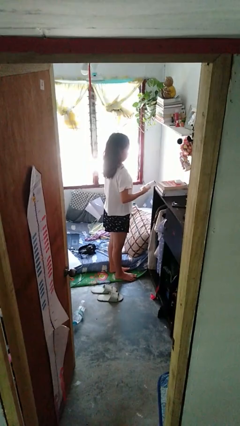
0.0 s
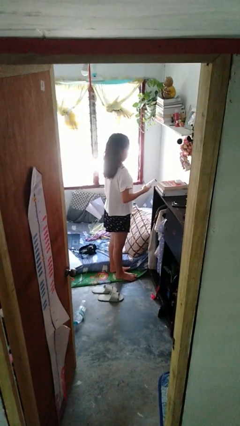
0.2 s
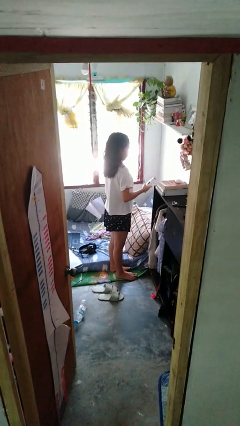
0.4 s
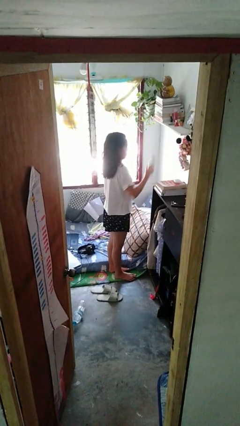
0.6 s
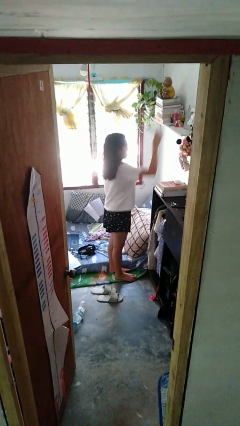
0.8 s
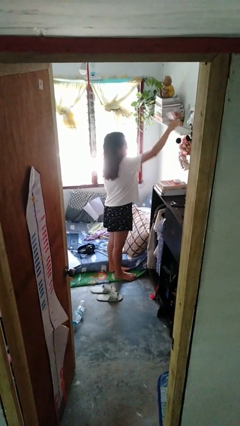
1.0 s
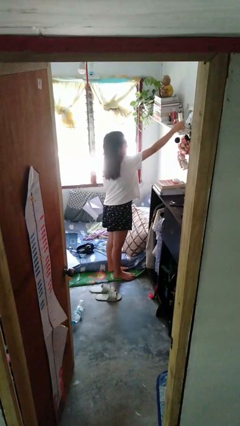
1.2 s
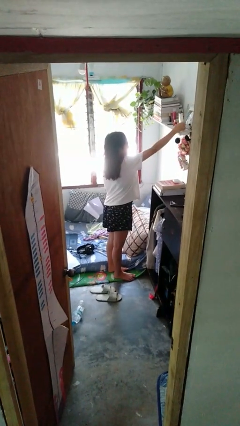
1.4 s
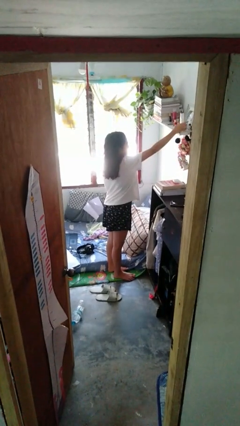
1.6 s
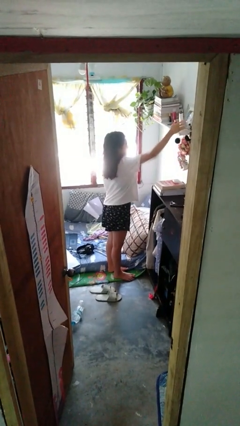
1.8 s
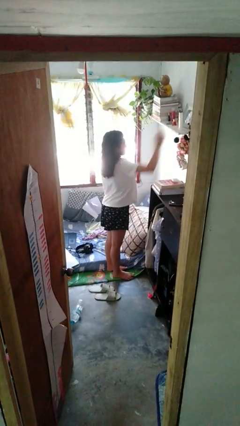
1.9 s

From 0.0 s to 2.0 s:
person puts down object on shelf

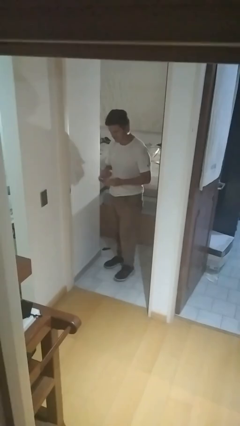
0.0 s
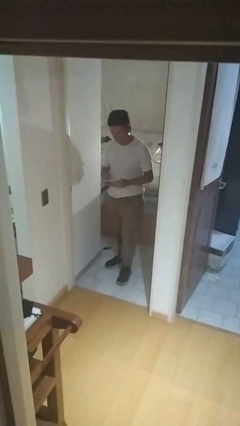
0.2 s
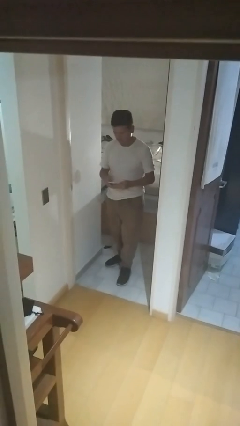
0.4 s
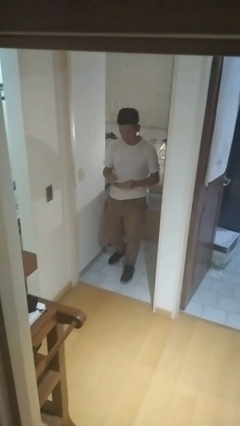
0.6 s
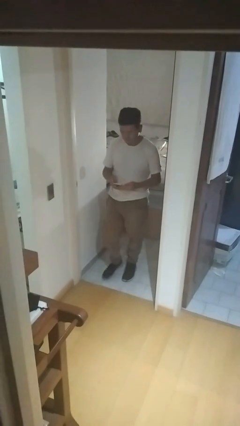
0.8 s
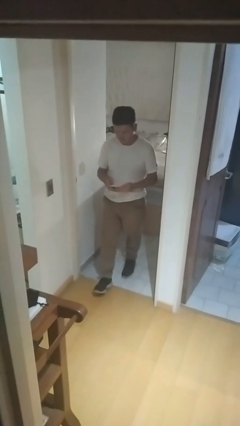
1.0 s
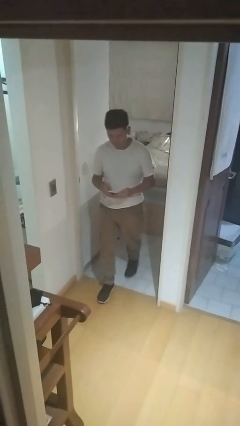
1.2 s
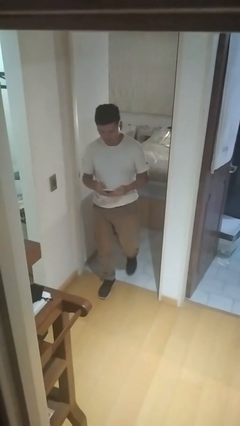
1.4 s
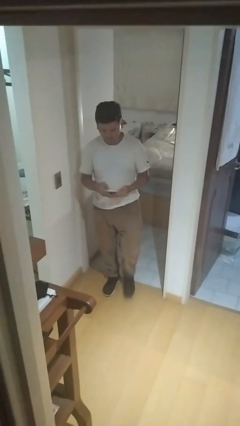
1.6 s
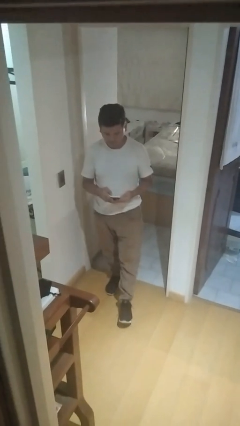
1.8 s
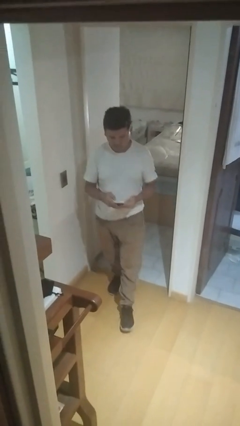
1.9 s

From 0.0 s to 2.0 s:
person enters scene through structure

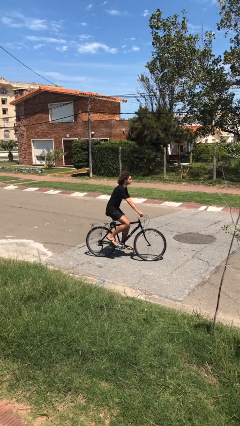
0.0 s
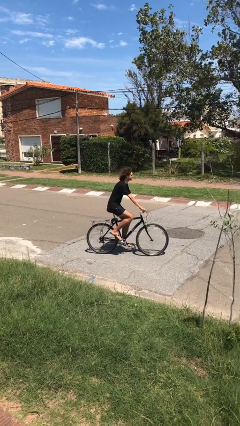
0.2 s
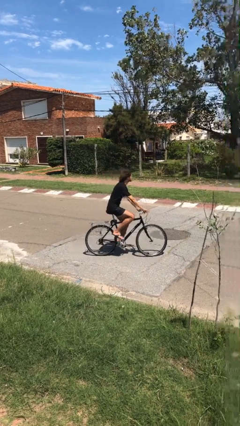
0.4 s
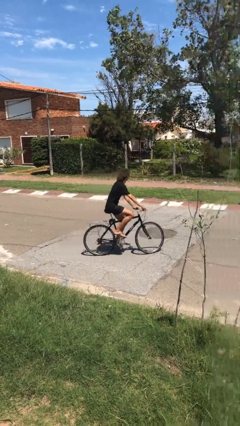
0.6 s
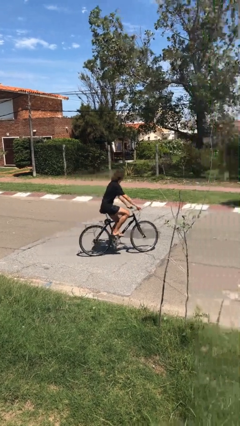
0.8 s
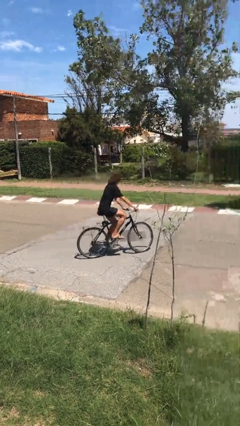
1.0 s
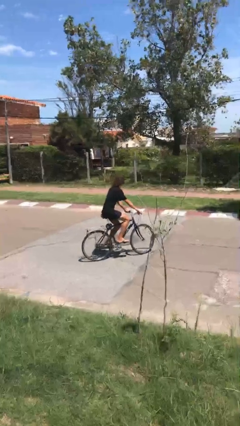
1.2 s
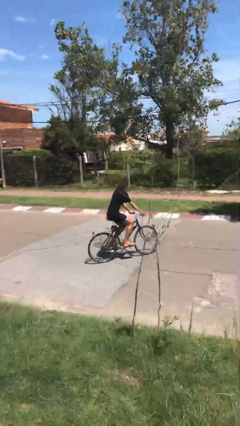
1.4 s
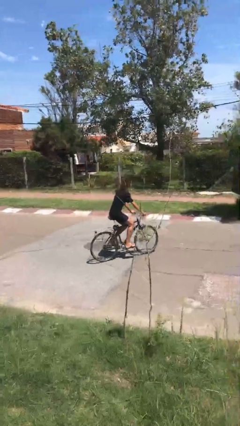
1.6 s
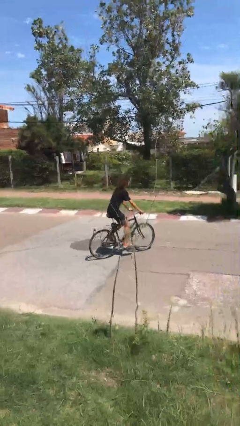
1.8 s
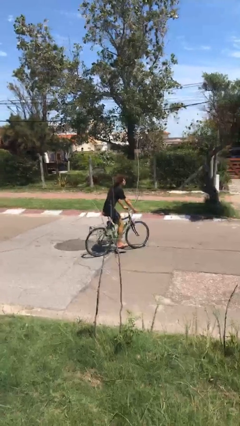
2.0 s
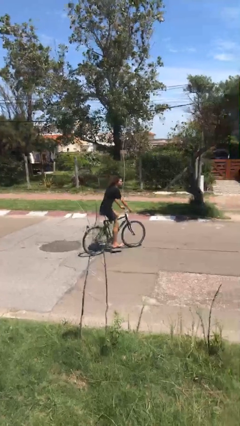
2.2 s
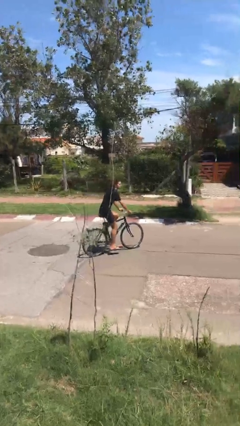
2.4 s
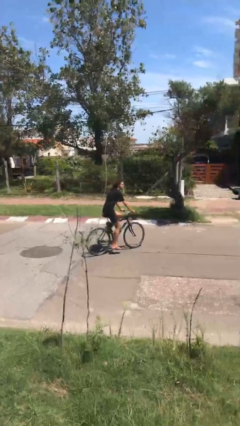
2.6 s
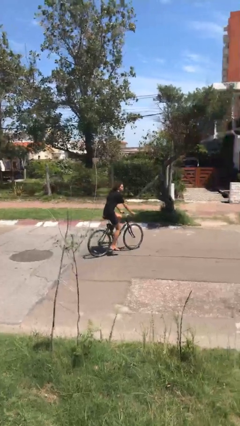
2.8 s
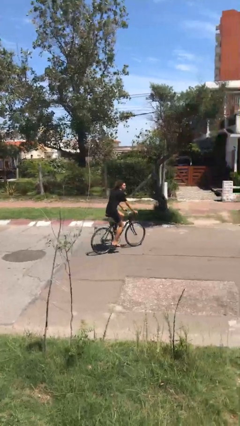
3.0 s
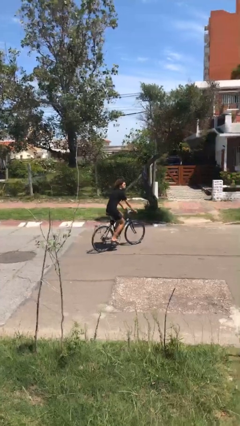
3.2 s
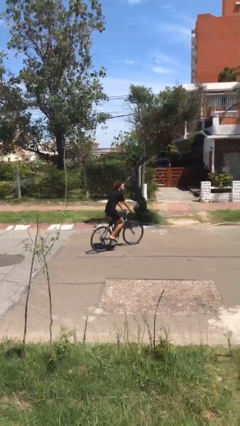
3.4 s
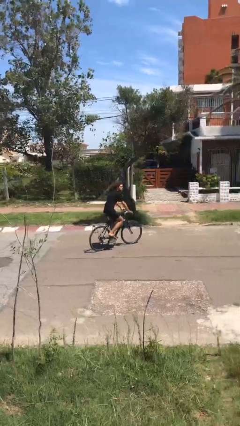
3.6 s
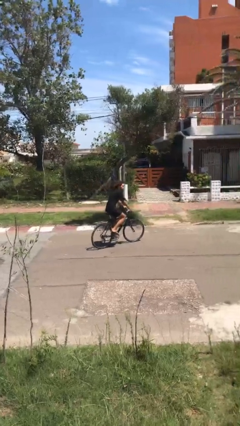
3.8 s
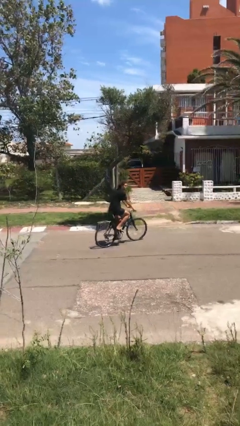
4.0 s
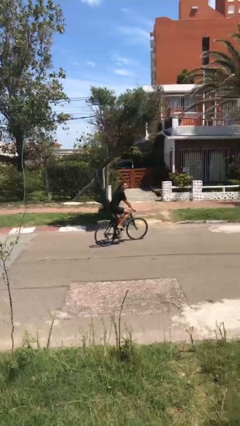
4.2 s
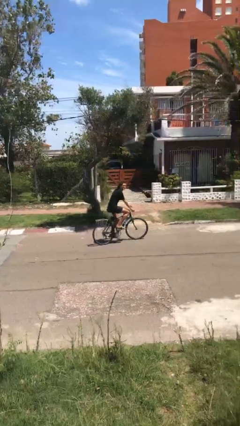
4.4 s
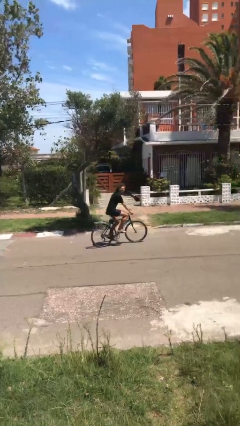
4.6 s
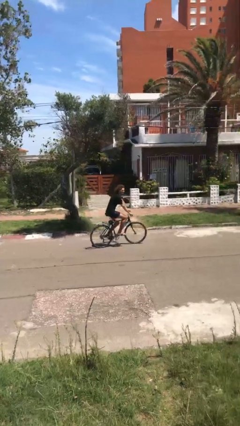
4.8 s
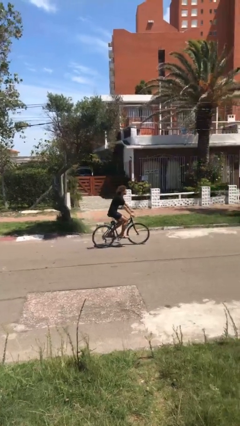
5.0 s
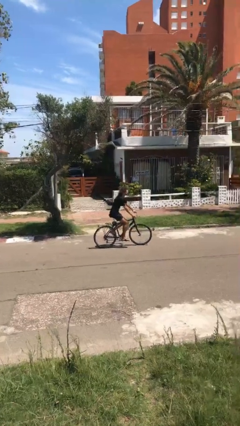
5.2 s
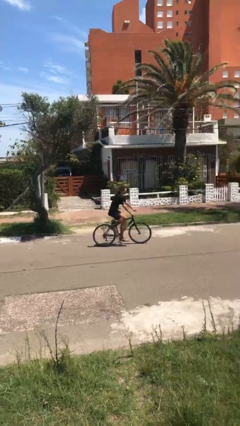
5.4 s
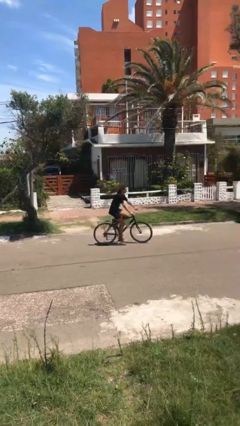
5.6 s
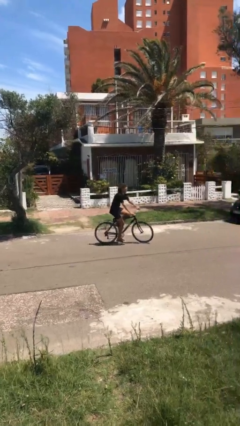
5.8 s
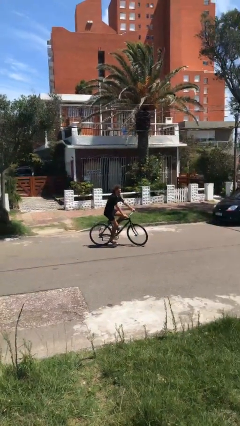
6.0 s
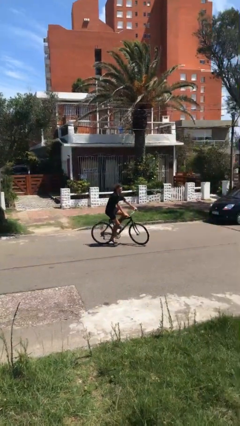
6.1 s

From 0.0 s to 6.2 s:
person rides bicycle

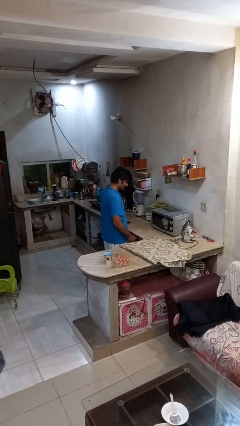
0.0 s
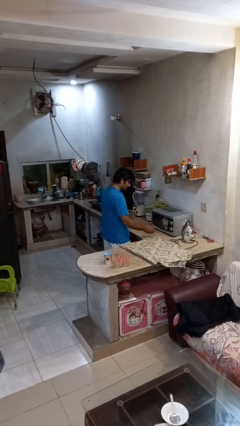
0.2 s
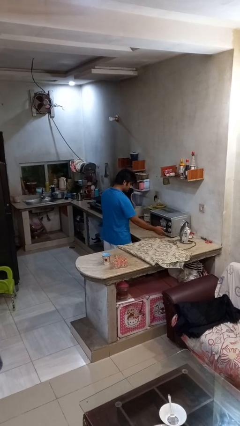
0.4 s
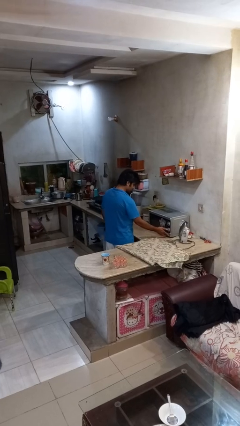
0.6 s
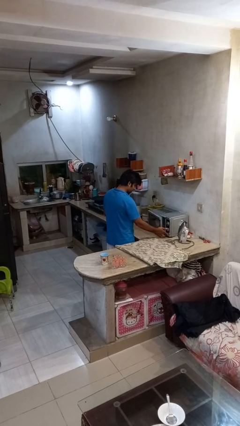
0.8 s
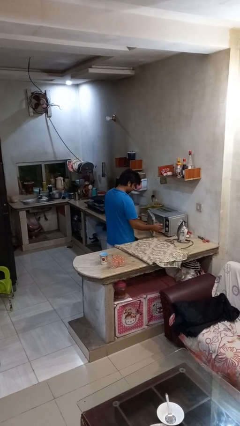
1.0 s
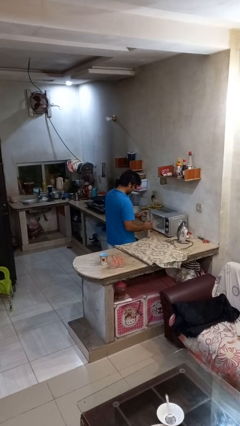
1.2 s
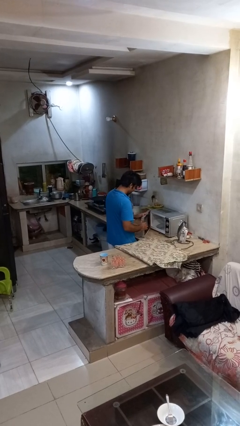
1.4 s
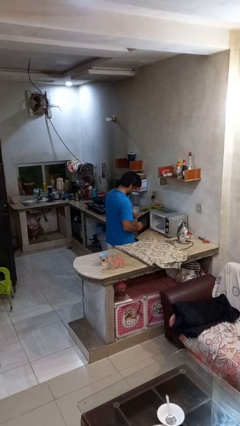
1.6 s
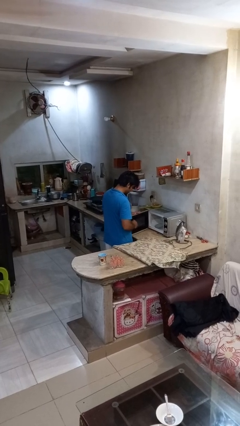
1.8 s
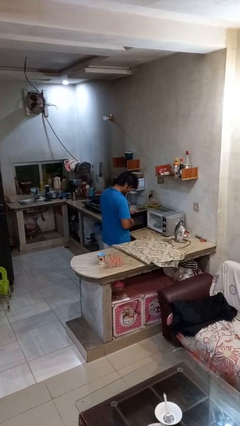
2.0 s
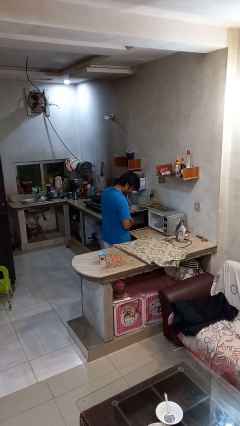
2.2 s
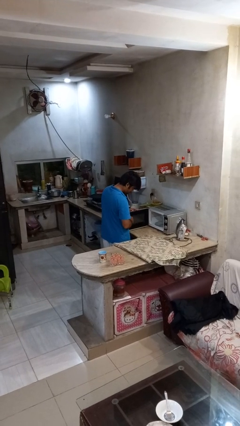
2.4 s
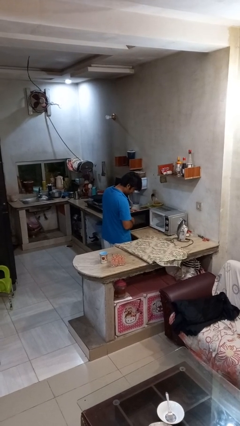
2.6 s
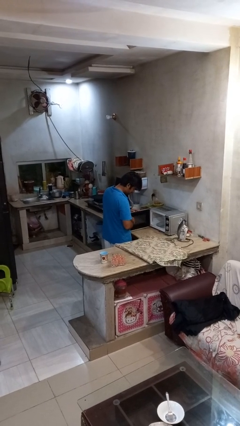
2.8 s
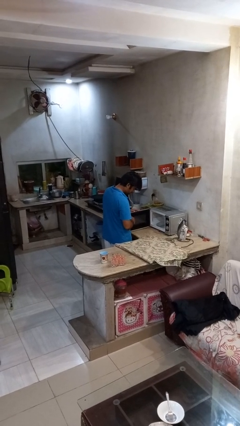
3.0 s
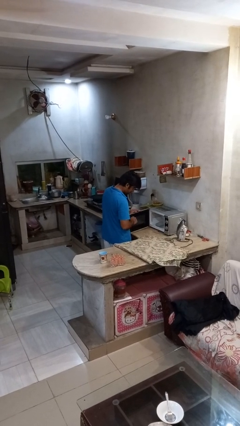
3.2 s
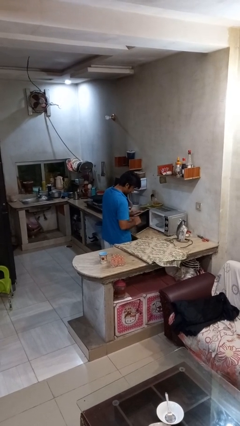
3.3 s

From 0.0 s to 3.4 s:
person opens microwave

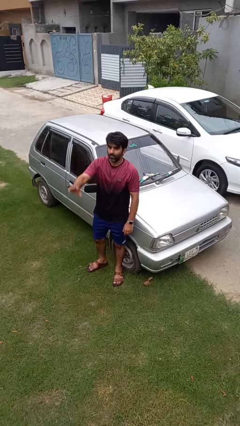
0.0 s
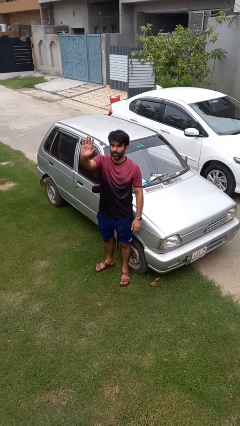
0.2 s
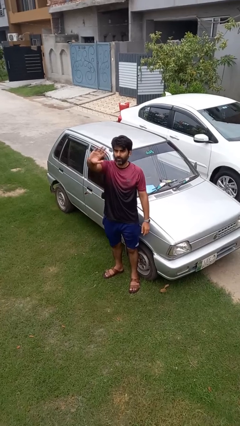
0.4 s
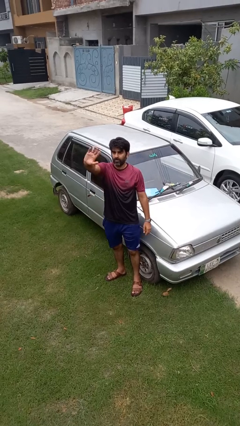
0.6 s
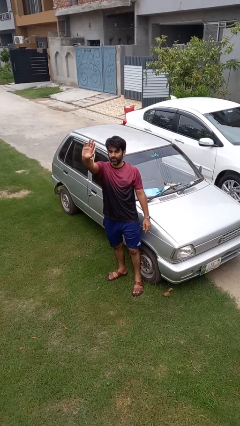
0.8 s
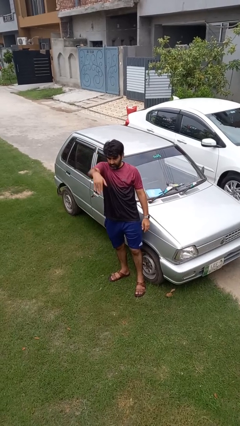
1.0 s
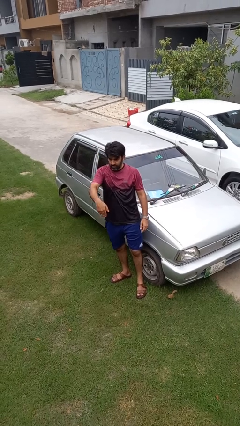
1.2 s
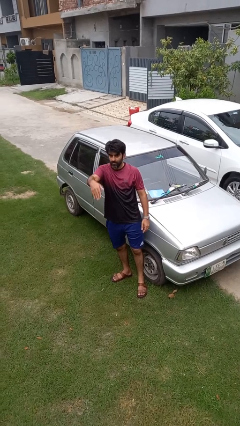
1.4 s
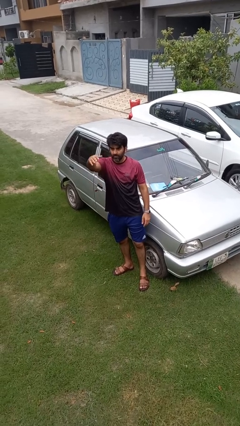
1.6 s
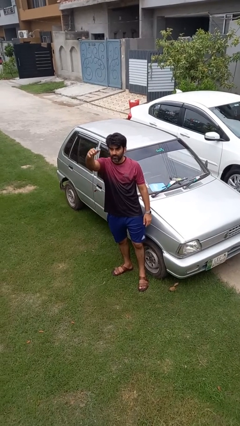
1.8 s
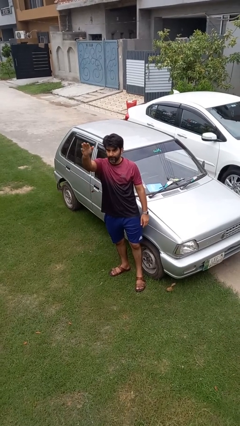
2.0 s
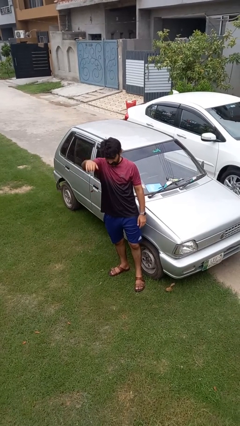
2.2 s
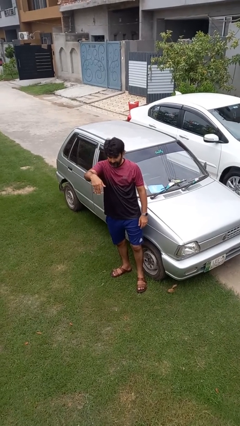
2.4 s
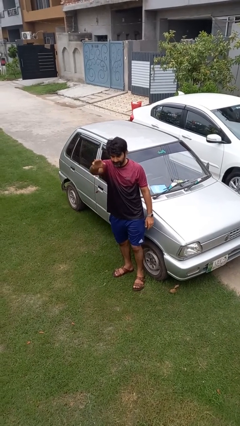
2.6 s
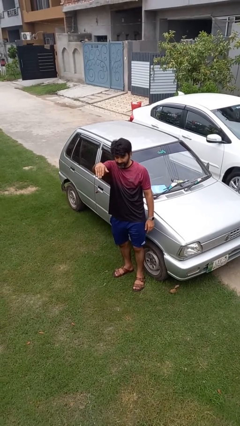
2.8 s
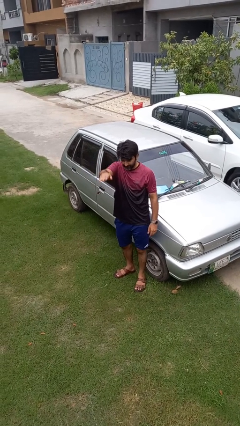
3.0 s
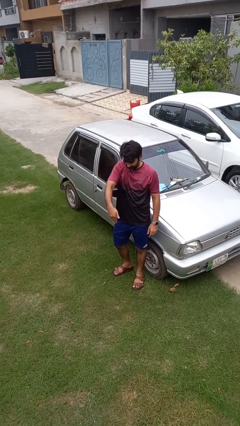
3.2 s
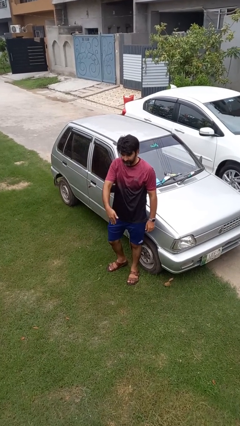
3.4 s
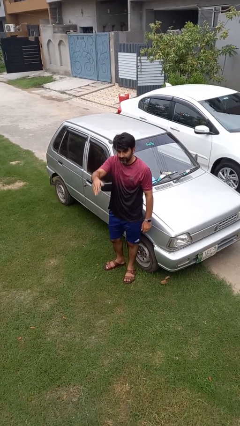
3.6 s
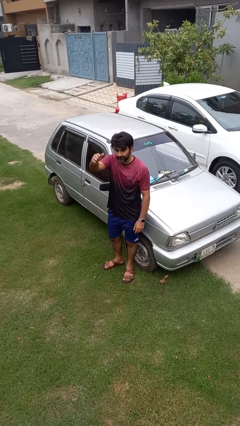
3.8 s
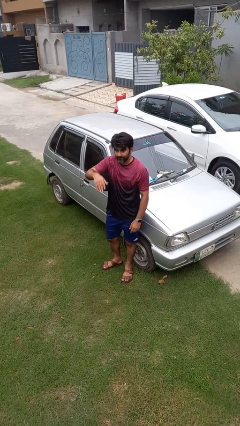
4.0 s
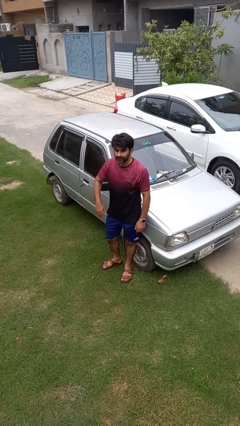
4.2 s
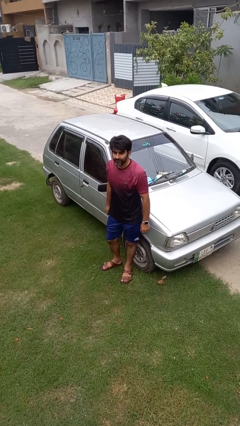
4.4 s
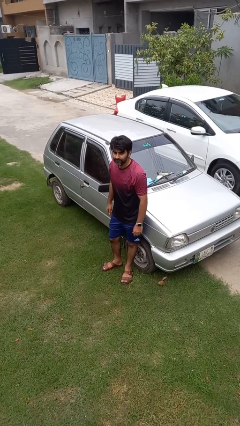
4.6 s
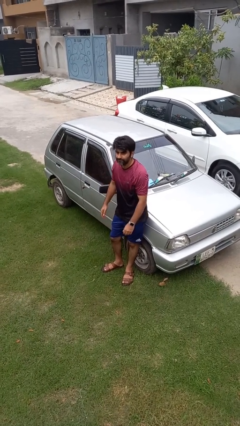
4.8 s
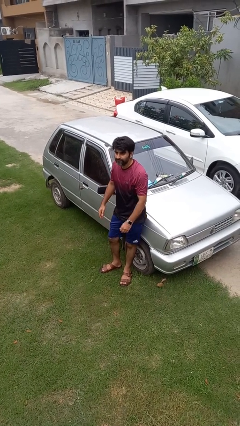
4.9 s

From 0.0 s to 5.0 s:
person gestures come here
